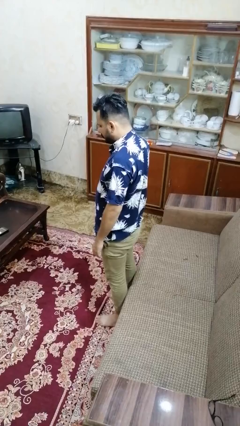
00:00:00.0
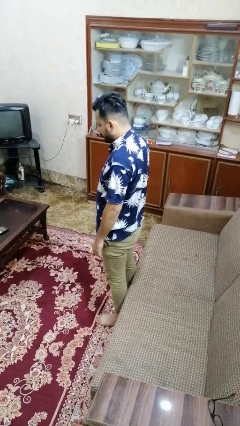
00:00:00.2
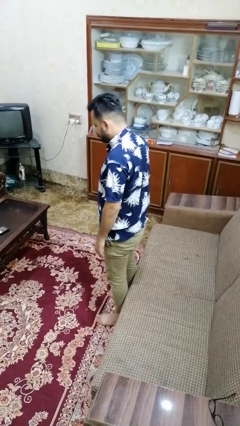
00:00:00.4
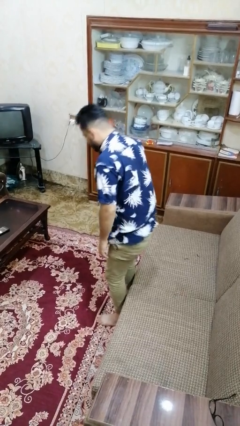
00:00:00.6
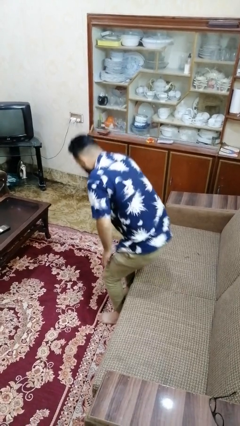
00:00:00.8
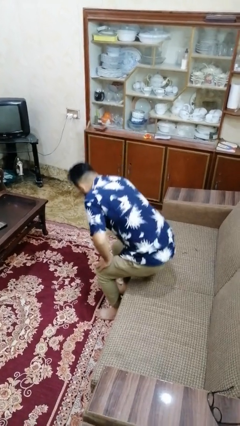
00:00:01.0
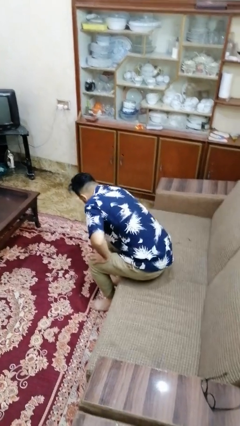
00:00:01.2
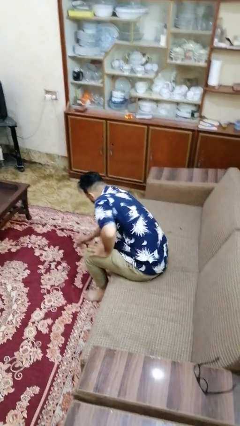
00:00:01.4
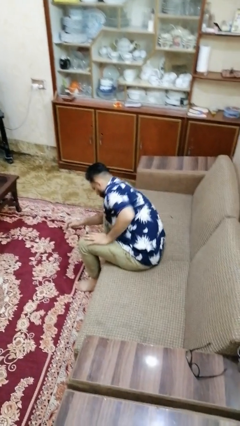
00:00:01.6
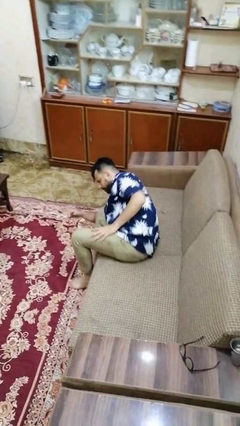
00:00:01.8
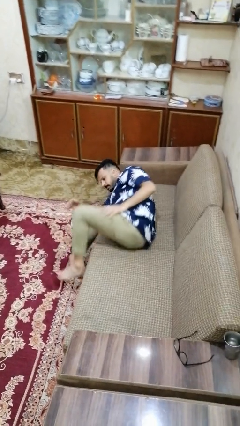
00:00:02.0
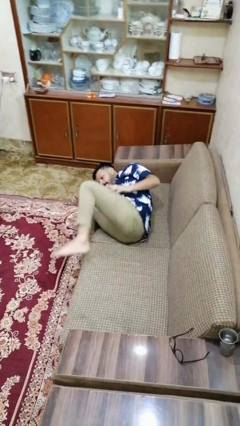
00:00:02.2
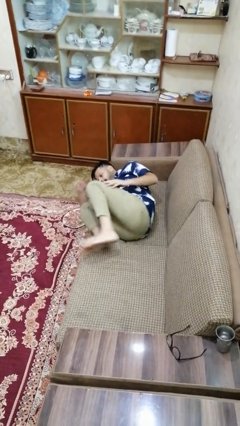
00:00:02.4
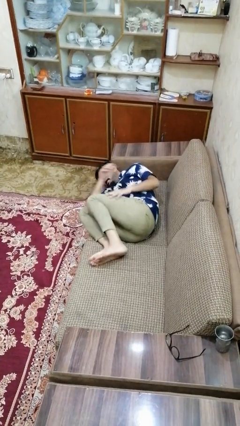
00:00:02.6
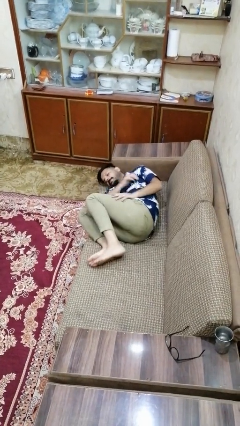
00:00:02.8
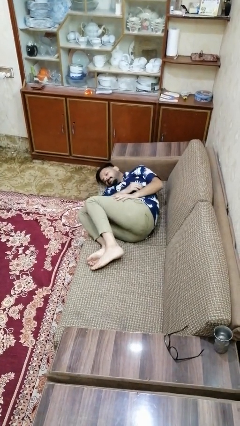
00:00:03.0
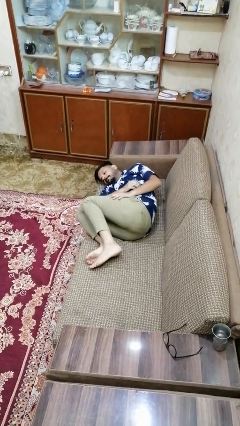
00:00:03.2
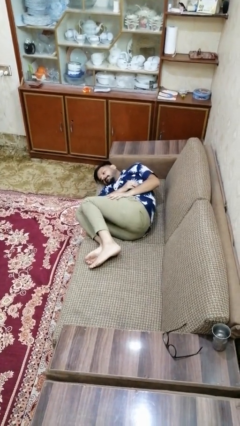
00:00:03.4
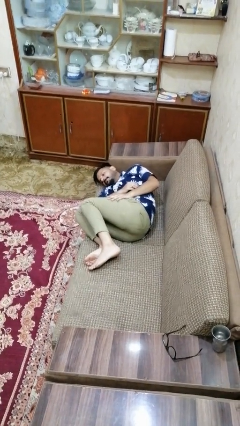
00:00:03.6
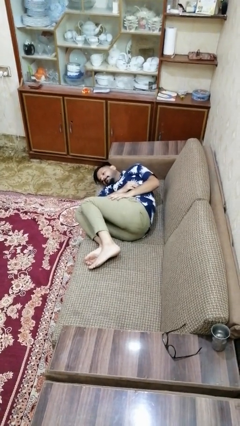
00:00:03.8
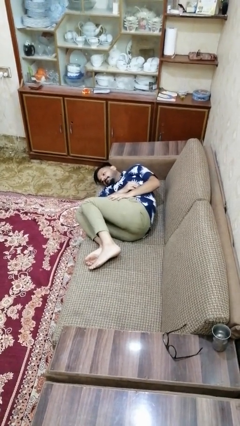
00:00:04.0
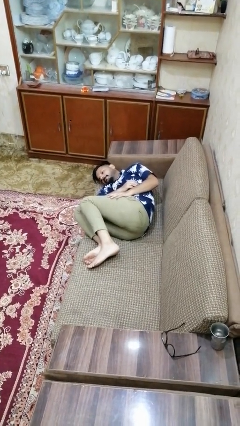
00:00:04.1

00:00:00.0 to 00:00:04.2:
person lies down on couch

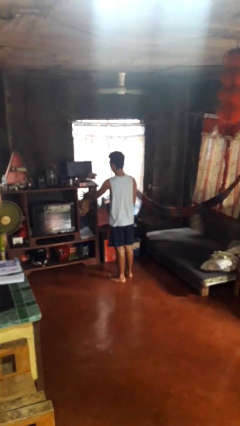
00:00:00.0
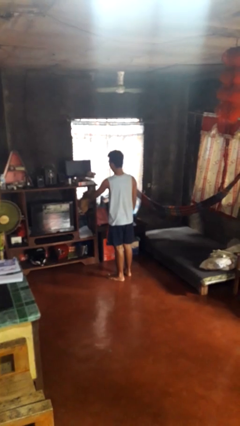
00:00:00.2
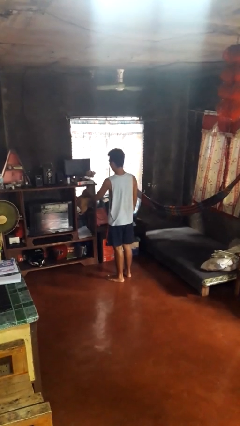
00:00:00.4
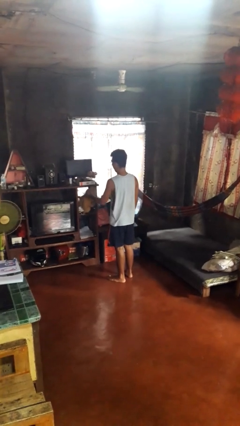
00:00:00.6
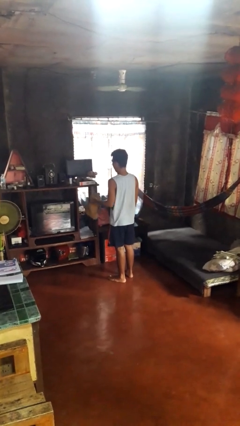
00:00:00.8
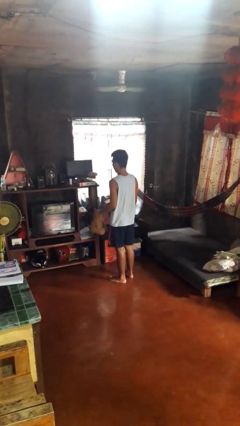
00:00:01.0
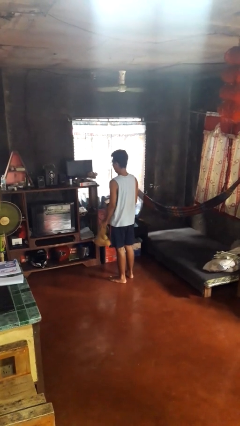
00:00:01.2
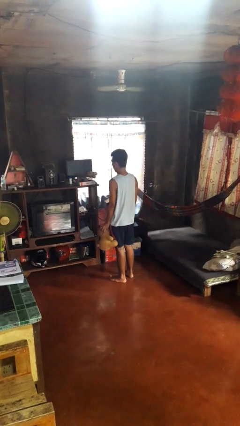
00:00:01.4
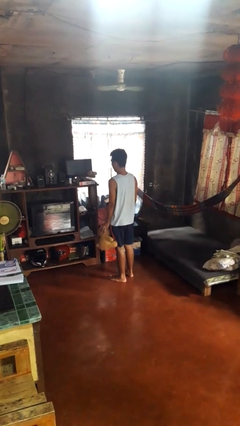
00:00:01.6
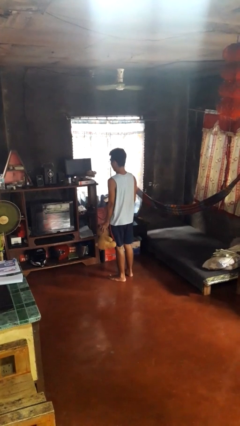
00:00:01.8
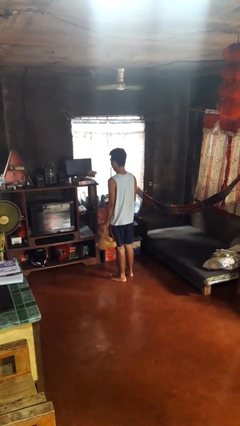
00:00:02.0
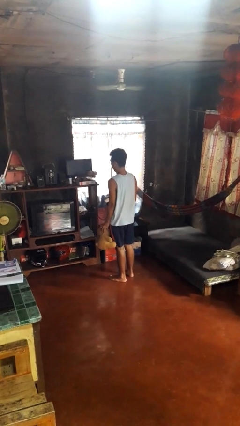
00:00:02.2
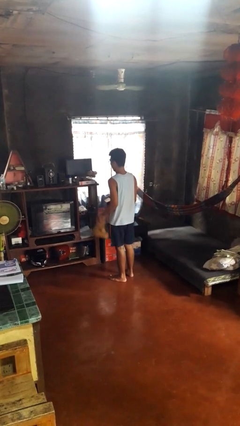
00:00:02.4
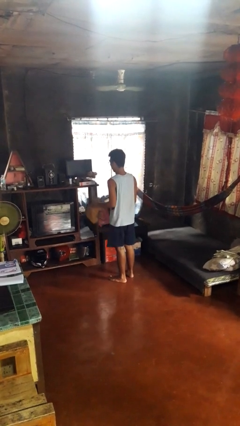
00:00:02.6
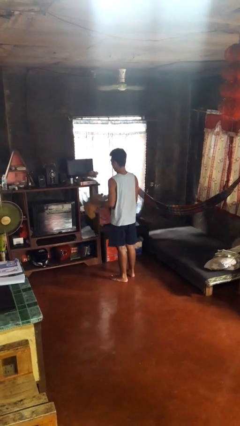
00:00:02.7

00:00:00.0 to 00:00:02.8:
person picks up object from cabinet

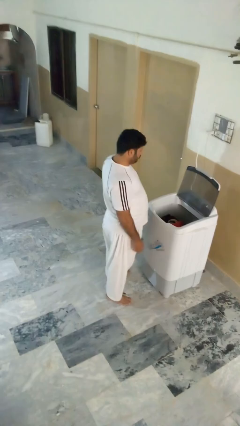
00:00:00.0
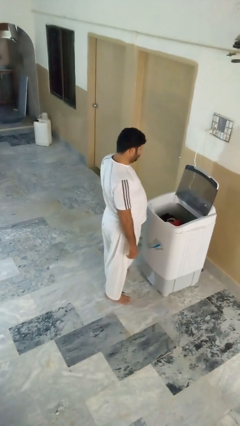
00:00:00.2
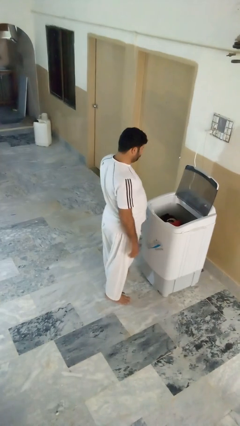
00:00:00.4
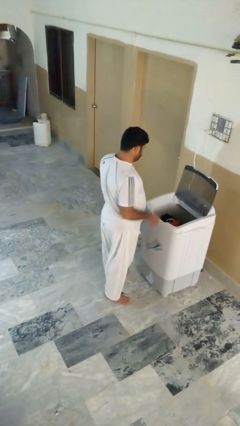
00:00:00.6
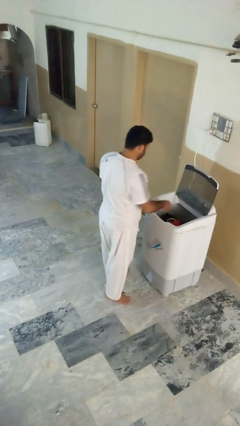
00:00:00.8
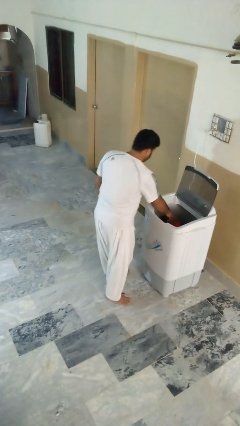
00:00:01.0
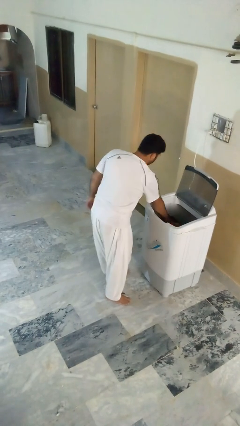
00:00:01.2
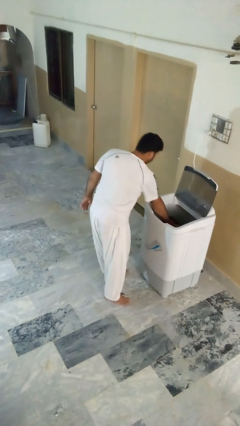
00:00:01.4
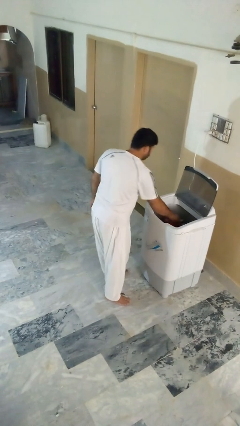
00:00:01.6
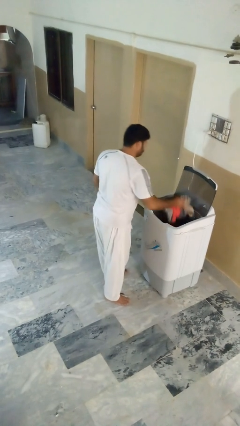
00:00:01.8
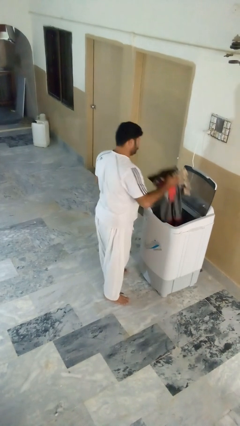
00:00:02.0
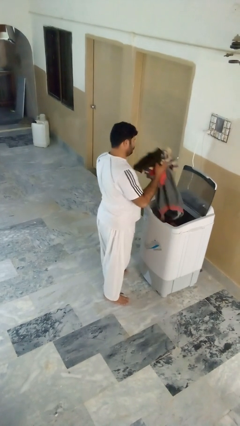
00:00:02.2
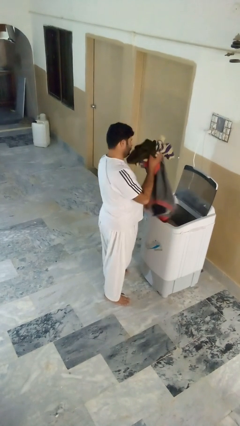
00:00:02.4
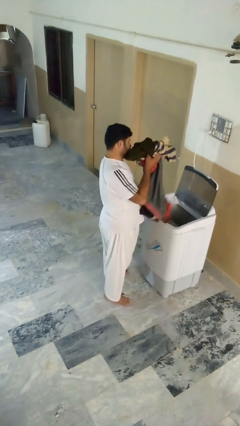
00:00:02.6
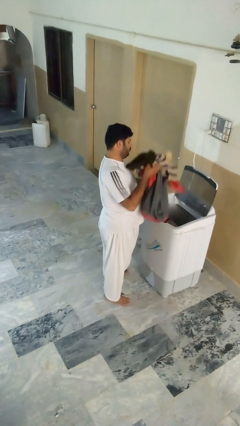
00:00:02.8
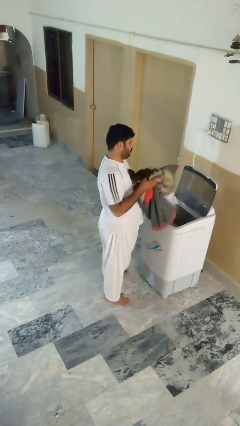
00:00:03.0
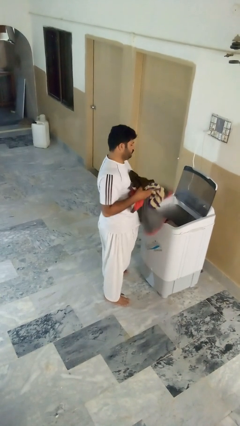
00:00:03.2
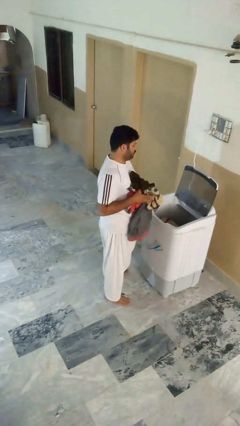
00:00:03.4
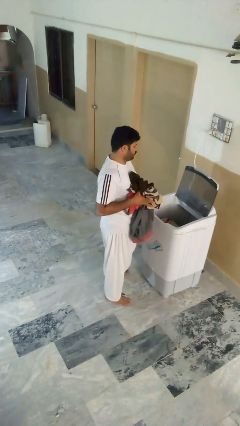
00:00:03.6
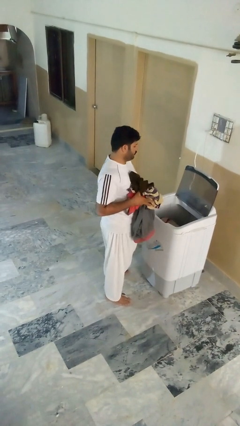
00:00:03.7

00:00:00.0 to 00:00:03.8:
person unloads clotheswasher

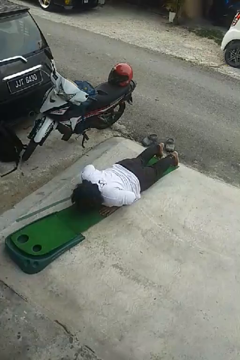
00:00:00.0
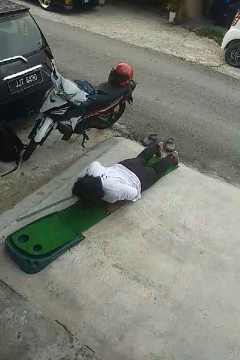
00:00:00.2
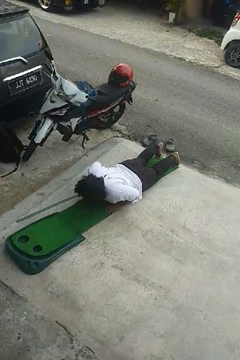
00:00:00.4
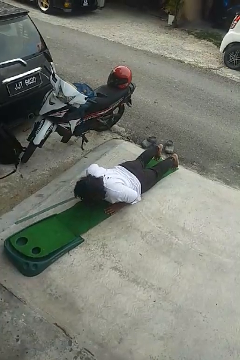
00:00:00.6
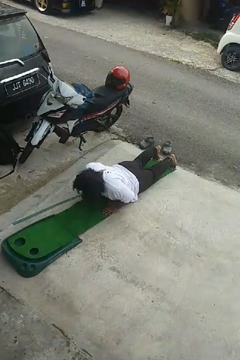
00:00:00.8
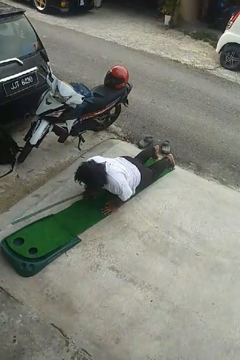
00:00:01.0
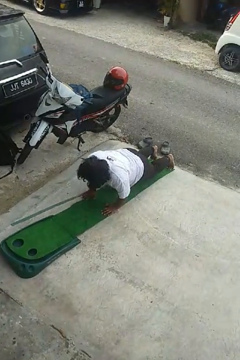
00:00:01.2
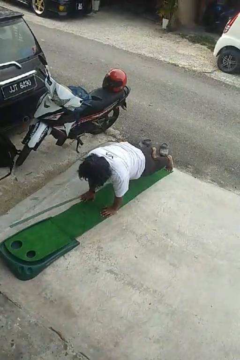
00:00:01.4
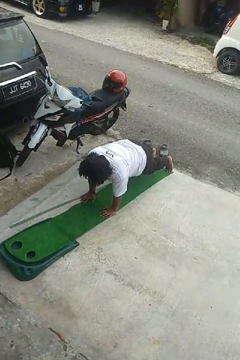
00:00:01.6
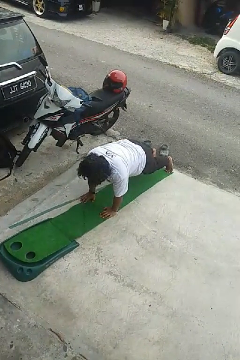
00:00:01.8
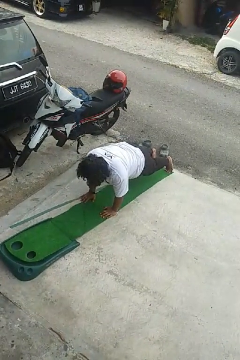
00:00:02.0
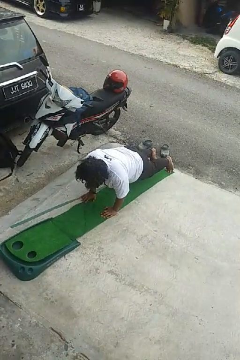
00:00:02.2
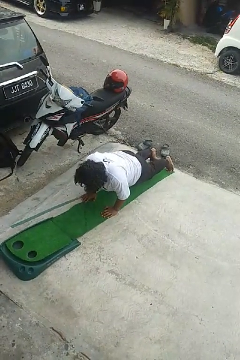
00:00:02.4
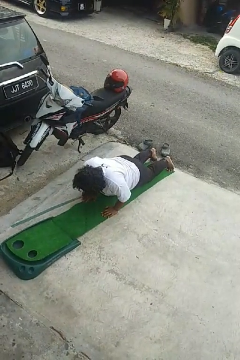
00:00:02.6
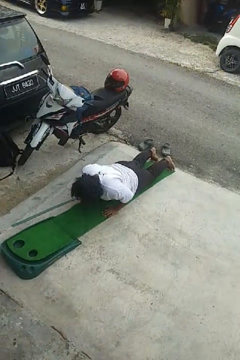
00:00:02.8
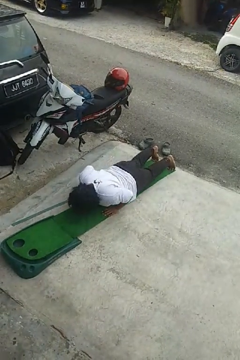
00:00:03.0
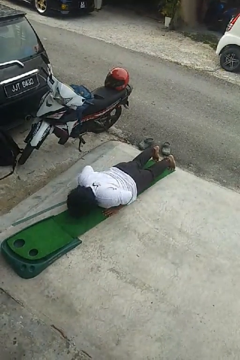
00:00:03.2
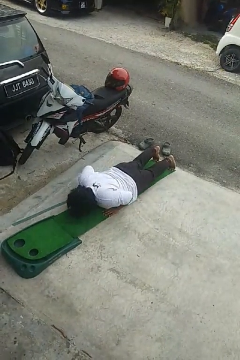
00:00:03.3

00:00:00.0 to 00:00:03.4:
person exercises with pushup

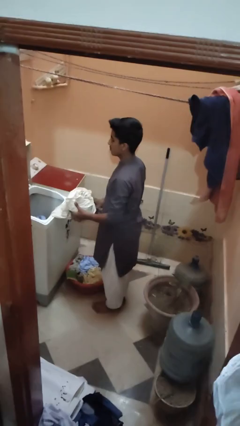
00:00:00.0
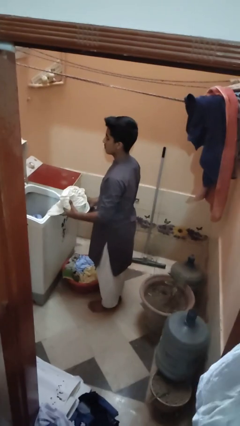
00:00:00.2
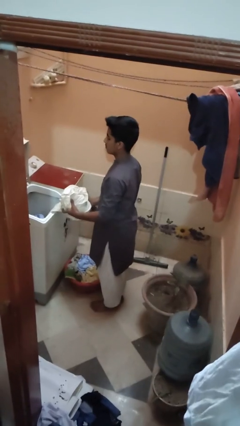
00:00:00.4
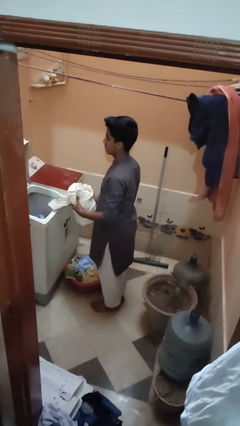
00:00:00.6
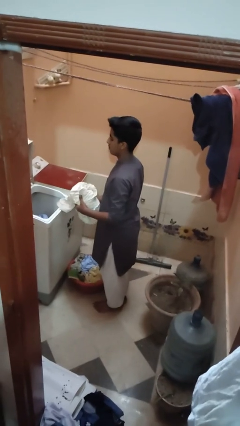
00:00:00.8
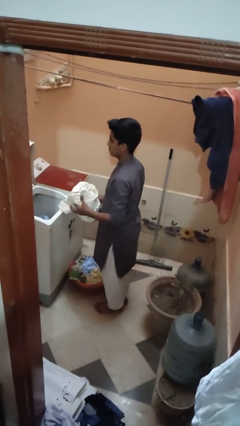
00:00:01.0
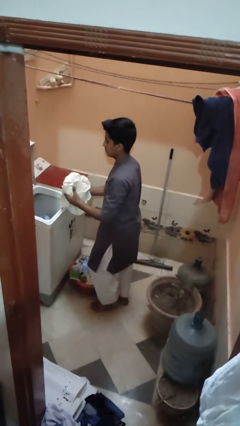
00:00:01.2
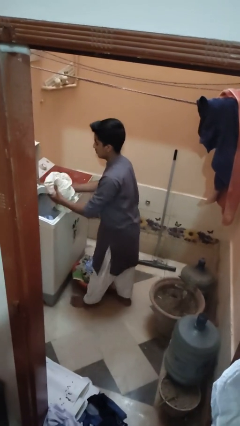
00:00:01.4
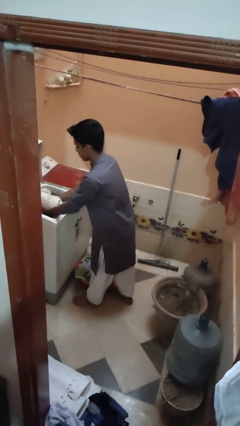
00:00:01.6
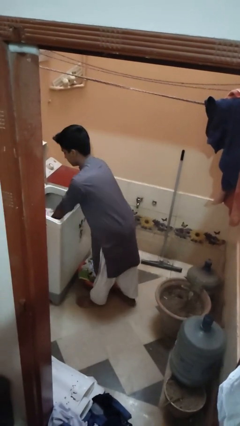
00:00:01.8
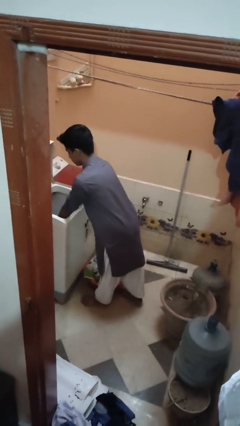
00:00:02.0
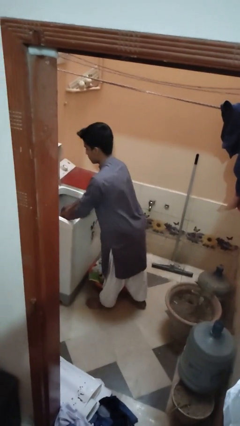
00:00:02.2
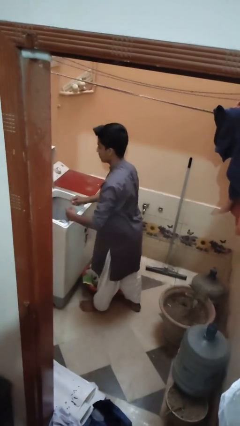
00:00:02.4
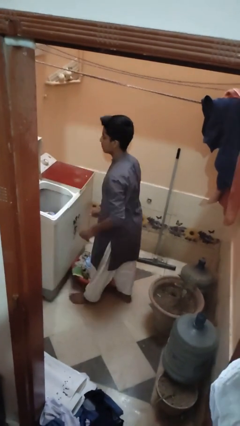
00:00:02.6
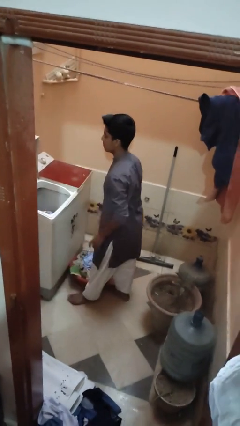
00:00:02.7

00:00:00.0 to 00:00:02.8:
person loads clotheswasher

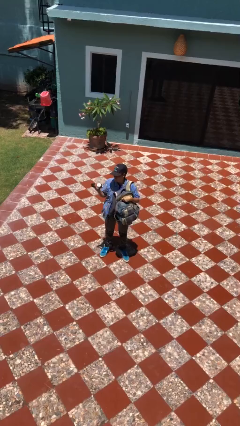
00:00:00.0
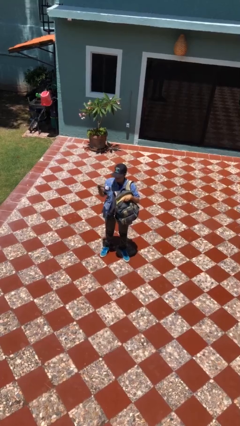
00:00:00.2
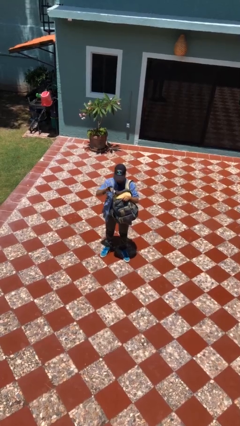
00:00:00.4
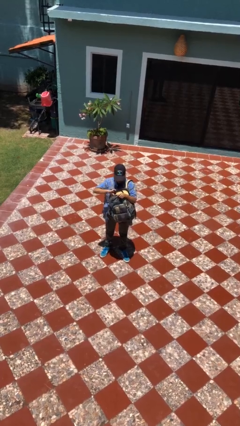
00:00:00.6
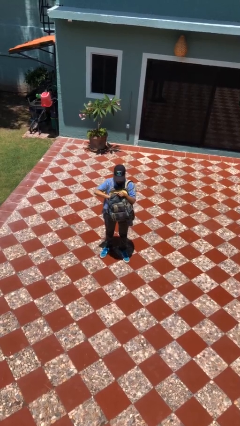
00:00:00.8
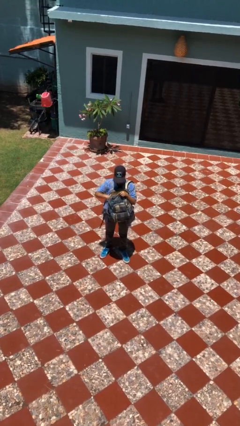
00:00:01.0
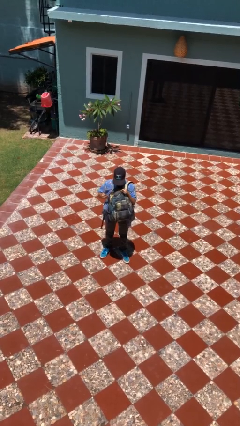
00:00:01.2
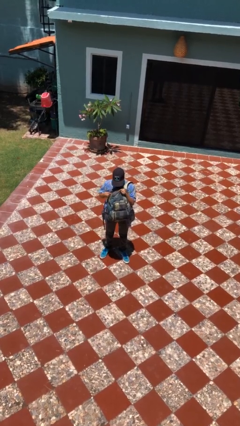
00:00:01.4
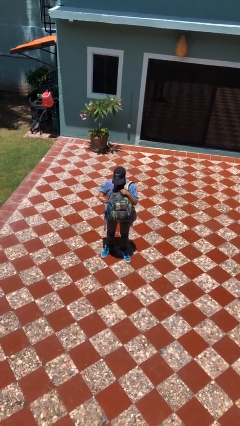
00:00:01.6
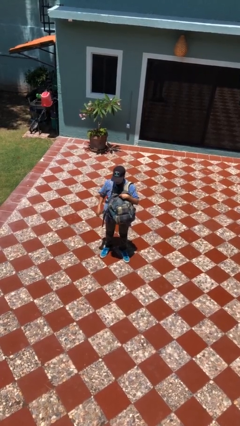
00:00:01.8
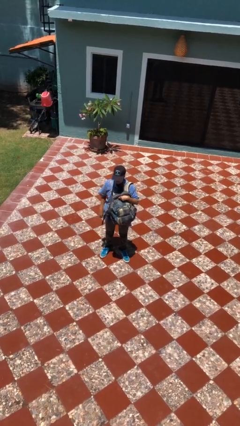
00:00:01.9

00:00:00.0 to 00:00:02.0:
person puts object into backpack
